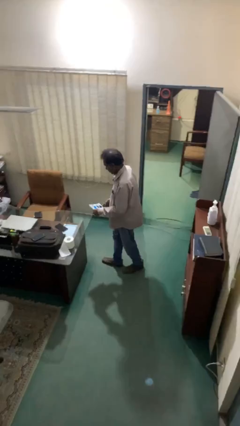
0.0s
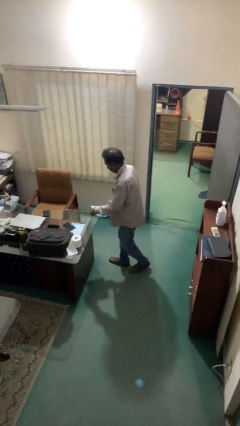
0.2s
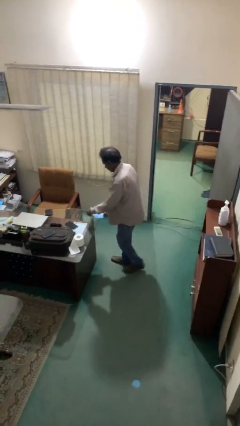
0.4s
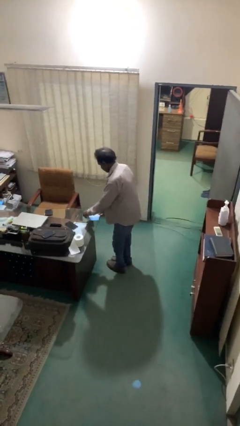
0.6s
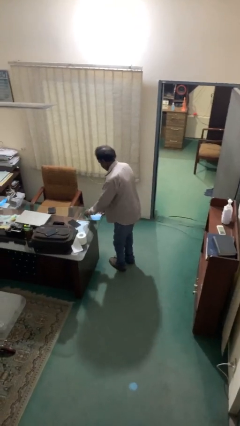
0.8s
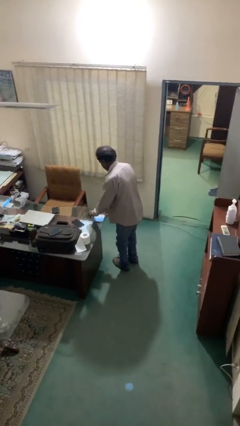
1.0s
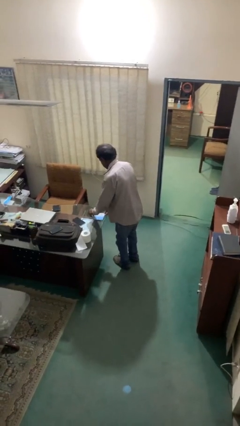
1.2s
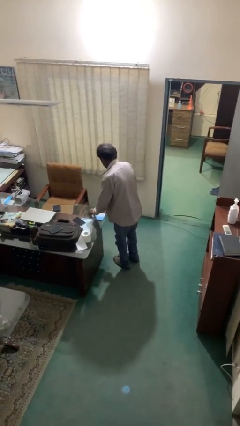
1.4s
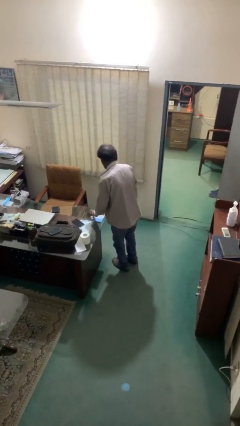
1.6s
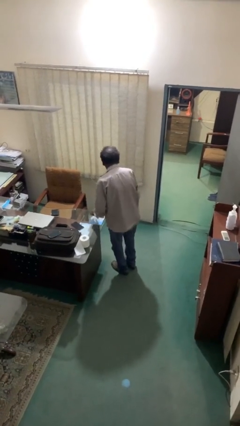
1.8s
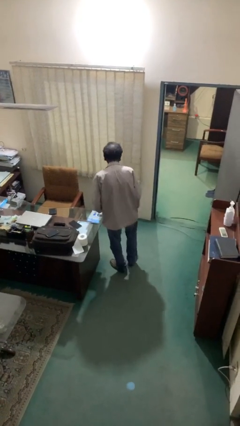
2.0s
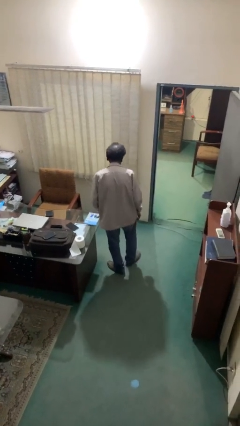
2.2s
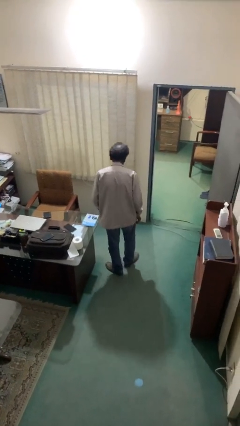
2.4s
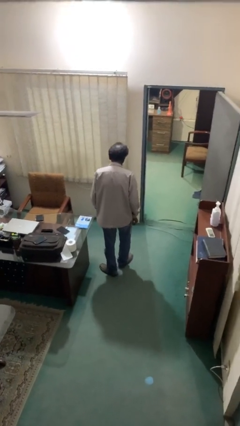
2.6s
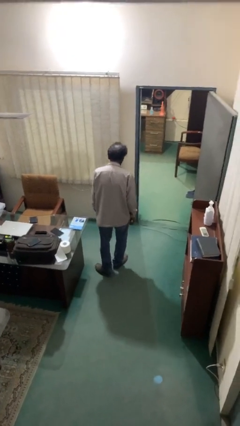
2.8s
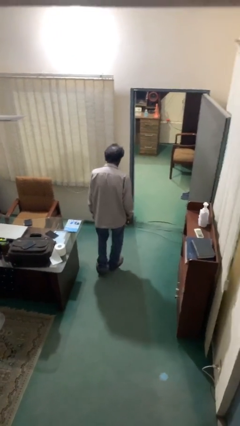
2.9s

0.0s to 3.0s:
person puts down object on table

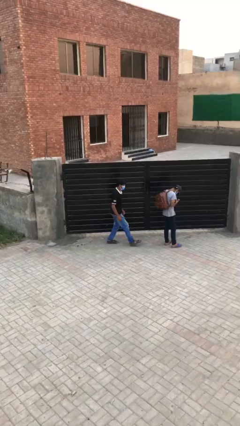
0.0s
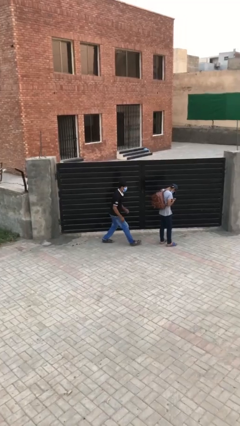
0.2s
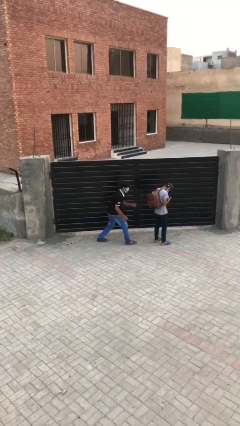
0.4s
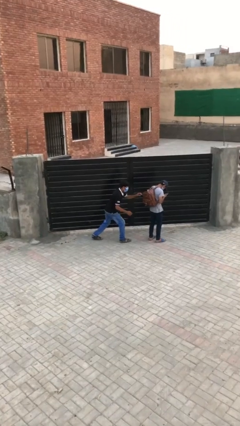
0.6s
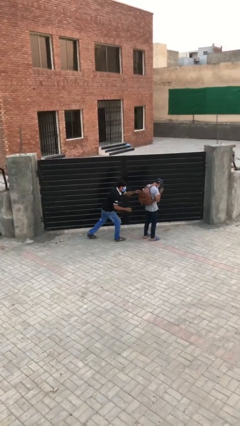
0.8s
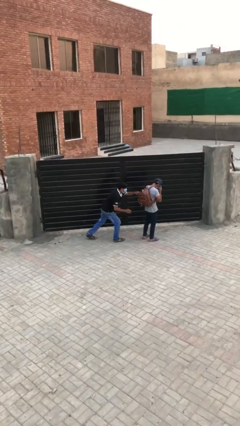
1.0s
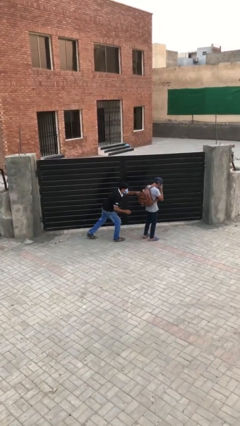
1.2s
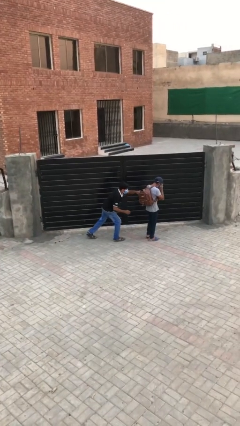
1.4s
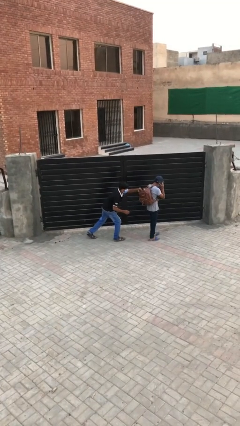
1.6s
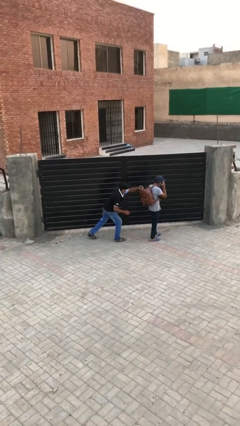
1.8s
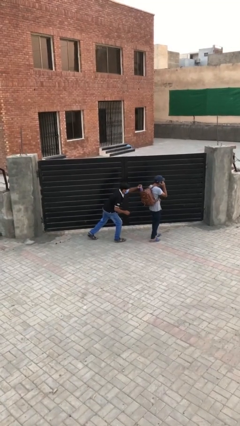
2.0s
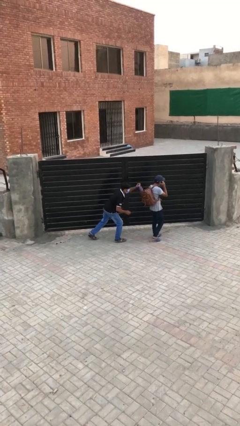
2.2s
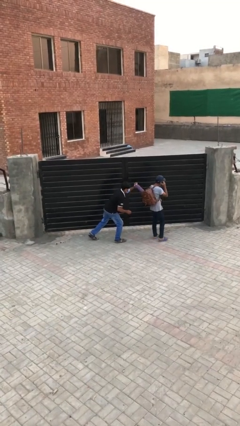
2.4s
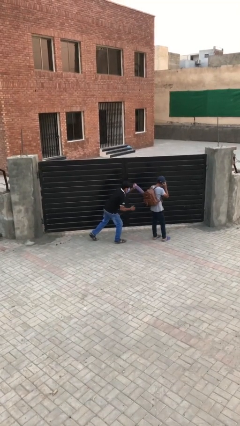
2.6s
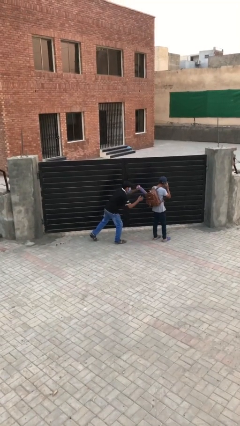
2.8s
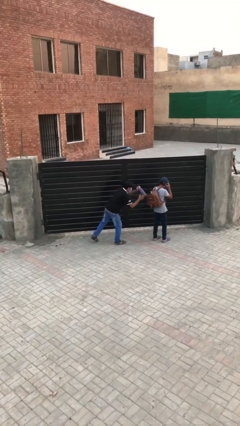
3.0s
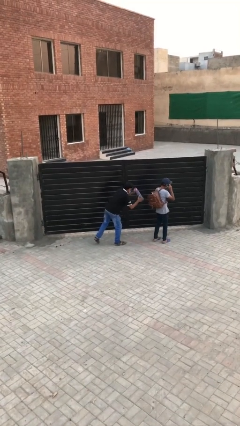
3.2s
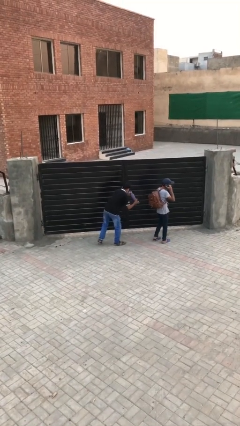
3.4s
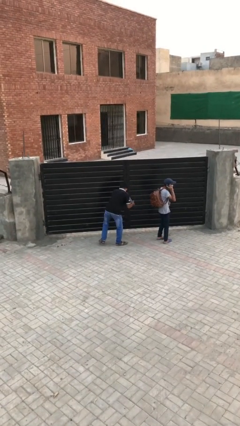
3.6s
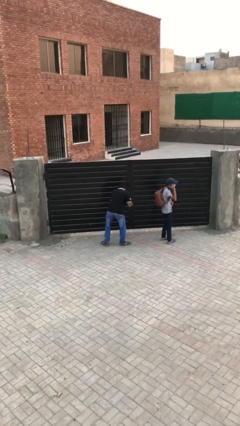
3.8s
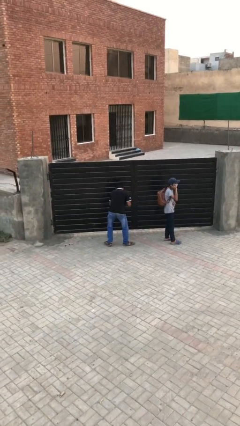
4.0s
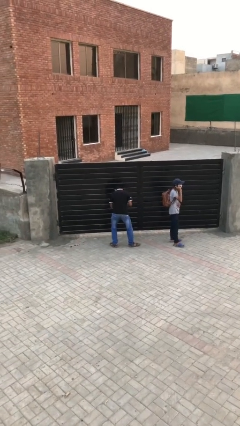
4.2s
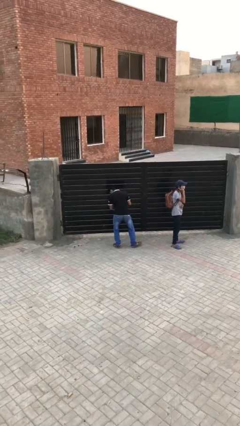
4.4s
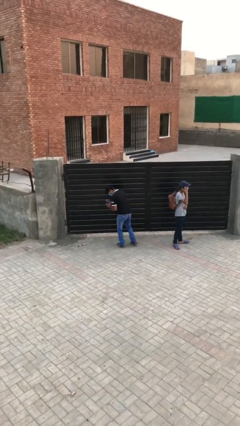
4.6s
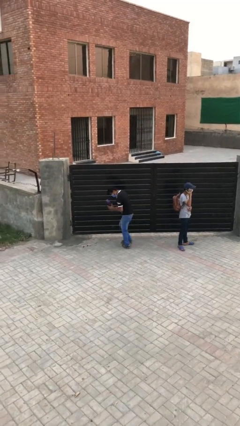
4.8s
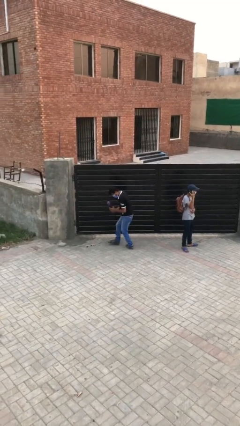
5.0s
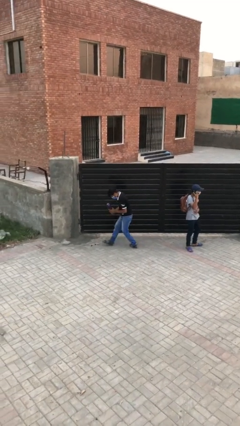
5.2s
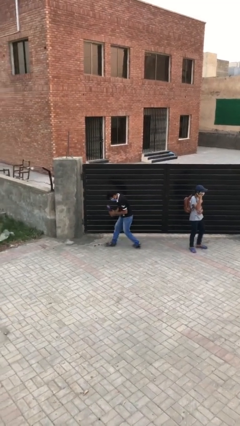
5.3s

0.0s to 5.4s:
person steals object from person

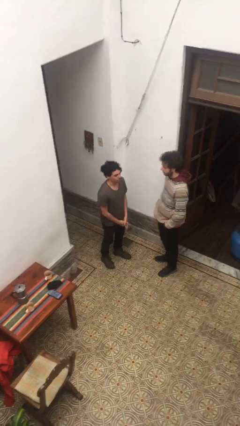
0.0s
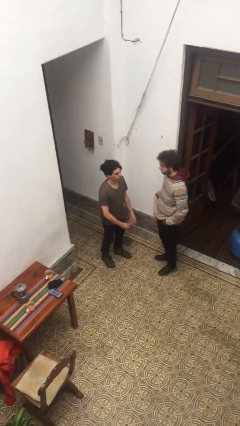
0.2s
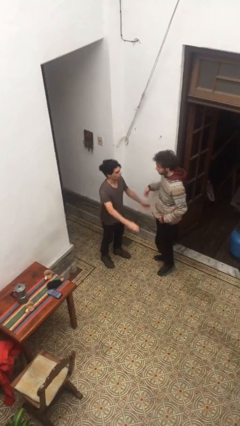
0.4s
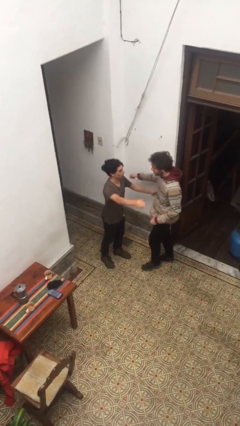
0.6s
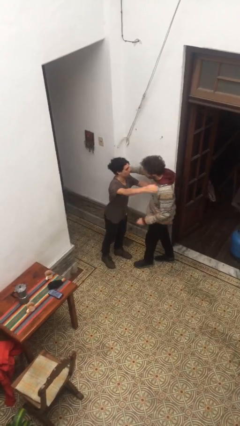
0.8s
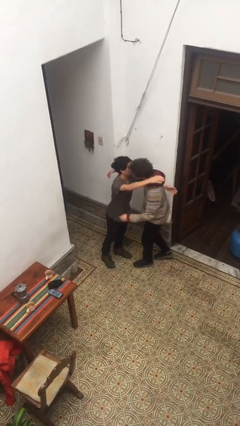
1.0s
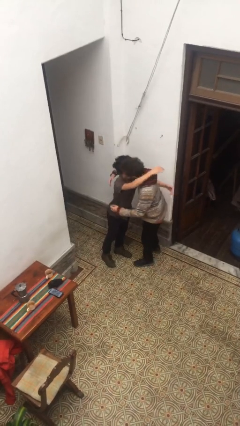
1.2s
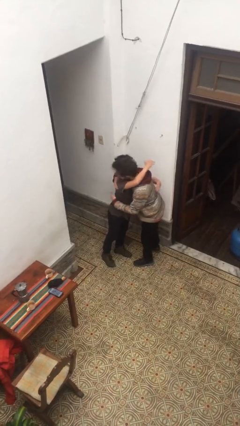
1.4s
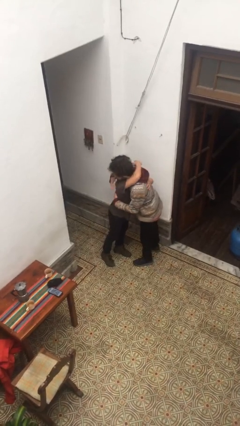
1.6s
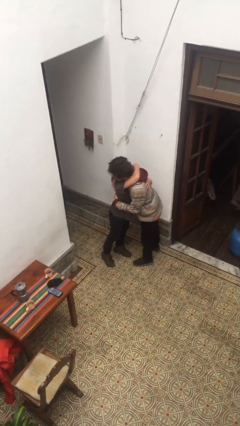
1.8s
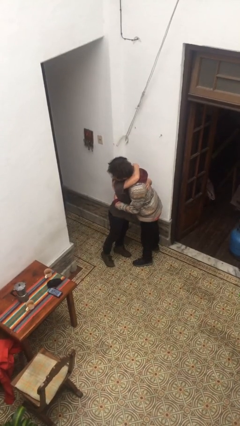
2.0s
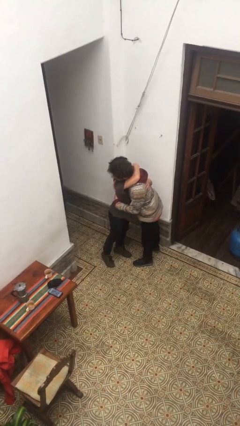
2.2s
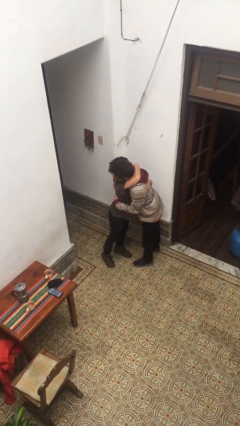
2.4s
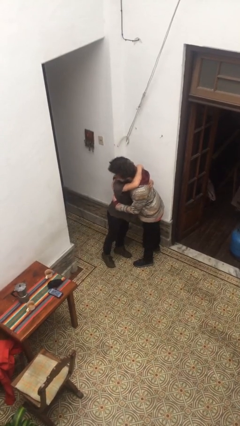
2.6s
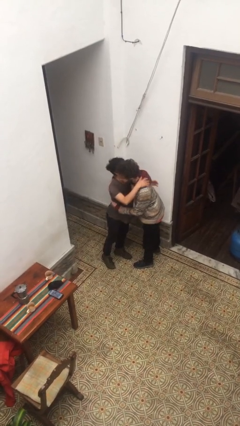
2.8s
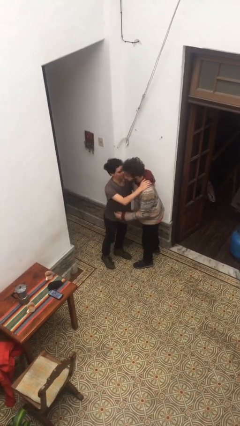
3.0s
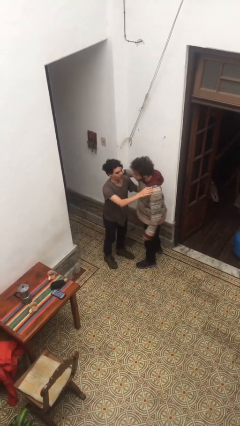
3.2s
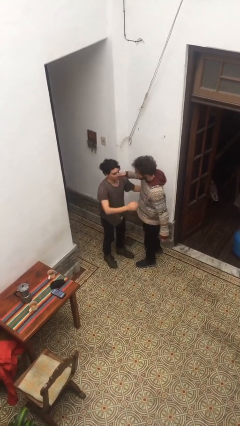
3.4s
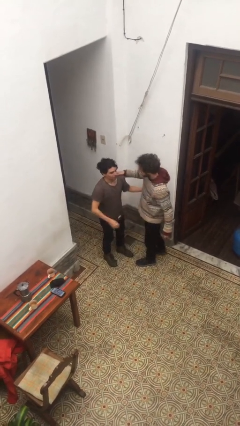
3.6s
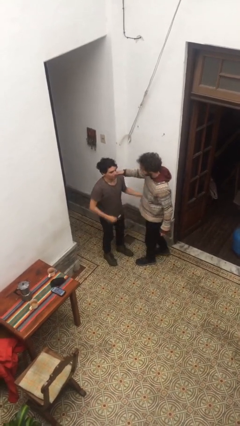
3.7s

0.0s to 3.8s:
person embraces person

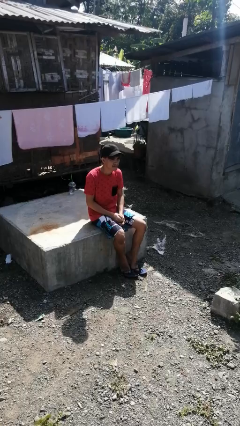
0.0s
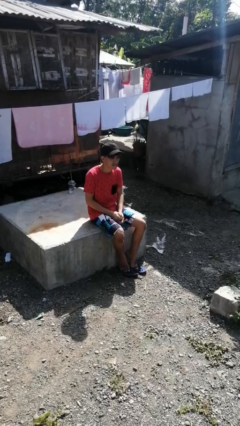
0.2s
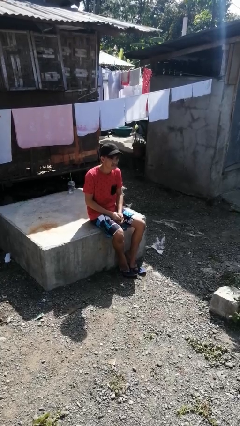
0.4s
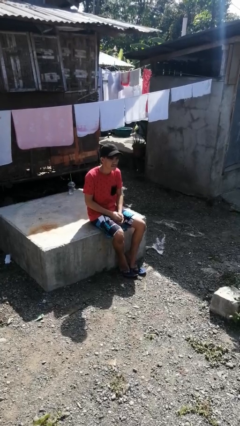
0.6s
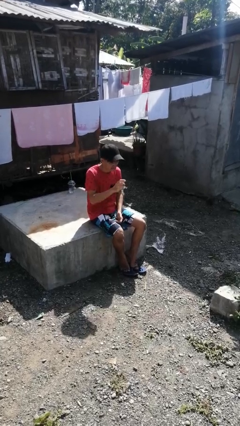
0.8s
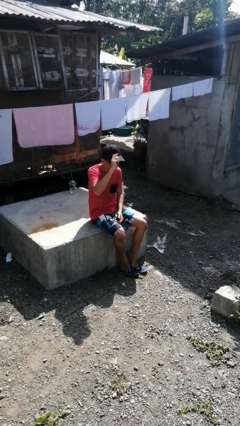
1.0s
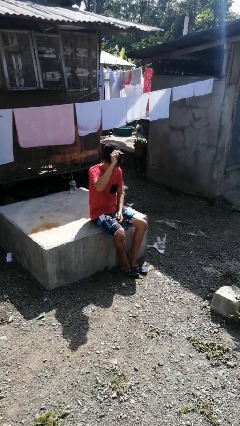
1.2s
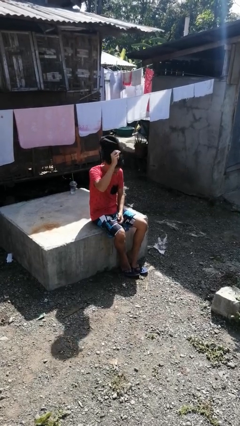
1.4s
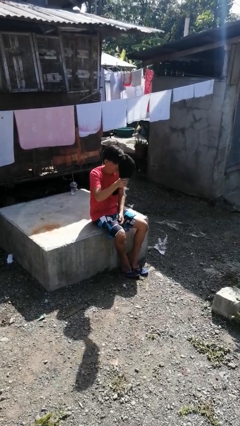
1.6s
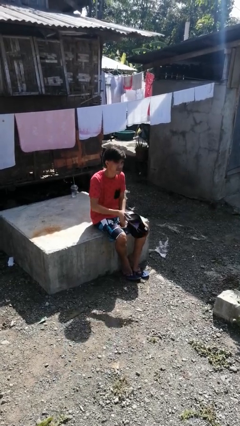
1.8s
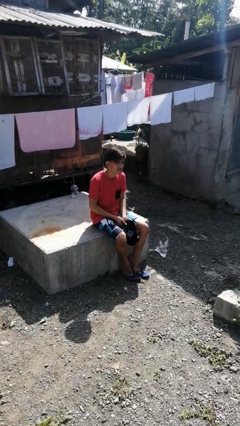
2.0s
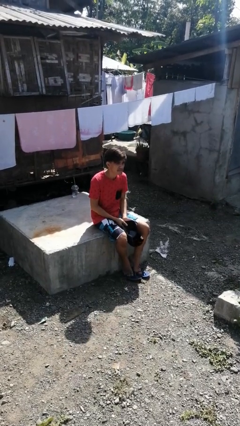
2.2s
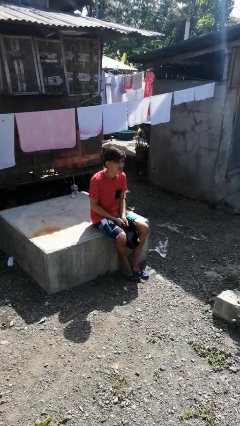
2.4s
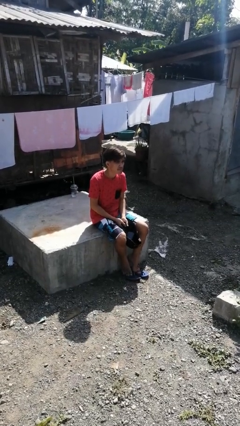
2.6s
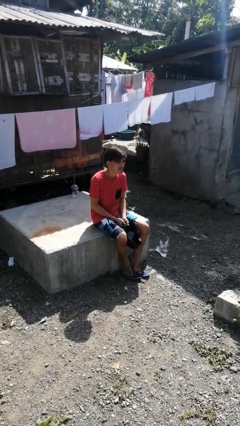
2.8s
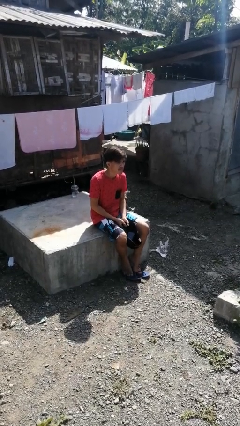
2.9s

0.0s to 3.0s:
person takes off hat

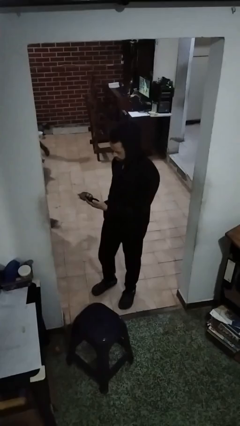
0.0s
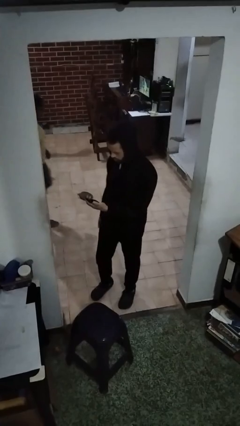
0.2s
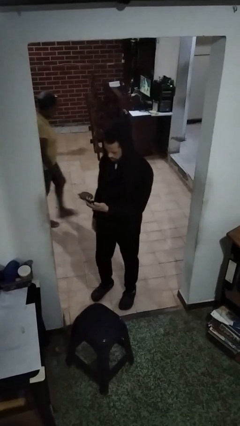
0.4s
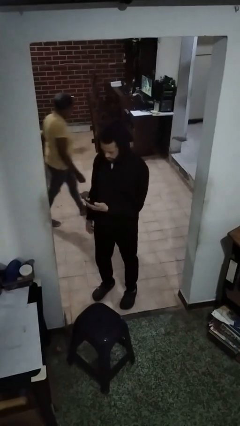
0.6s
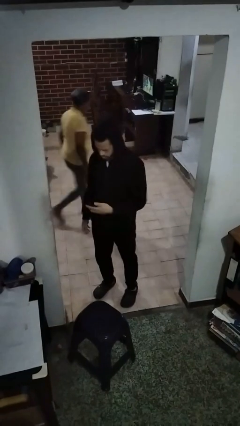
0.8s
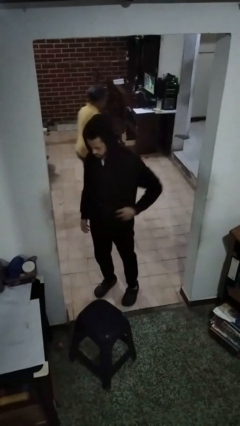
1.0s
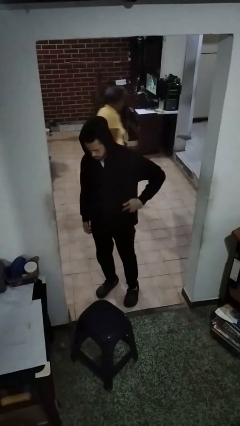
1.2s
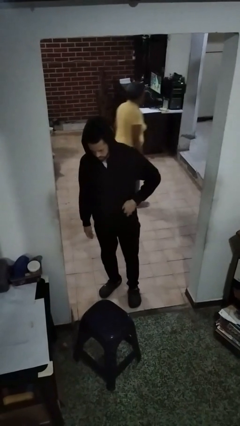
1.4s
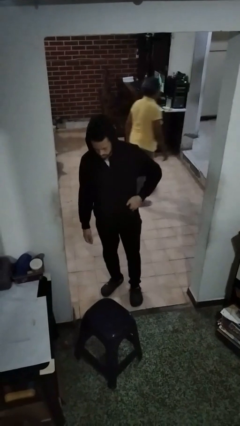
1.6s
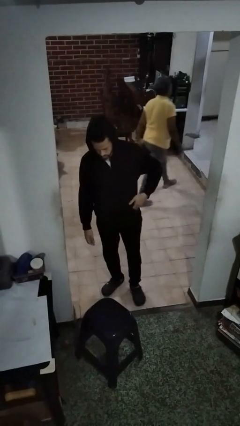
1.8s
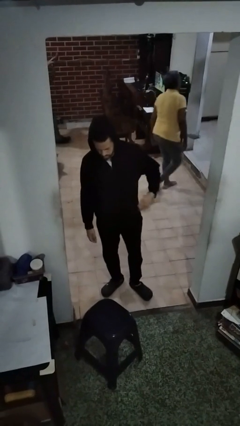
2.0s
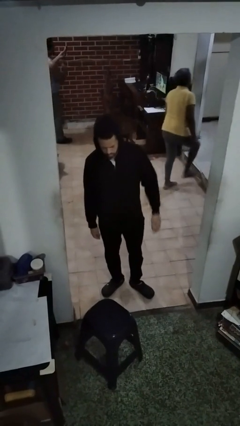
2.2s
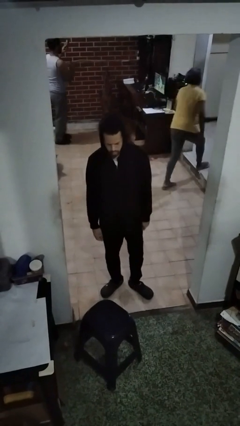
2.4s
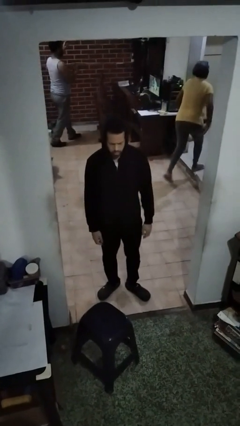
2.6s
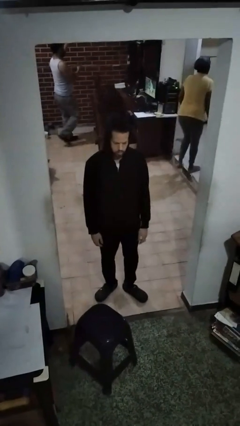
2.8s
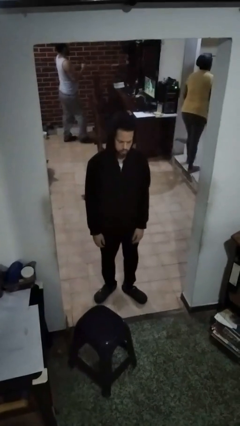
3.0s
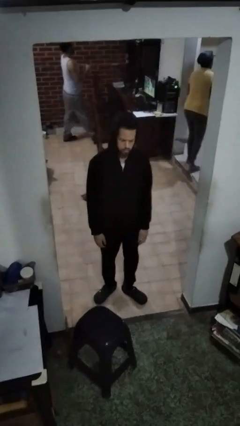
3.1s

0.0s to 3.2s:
person puts phone into pocket
